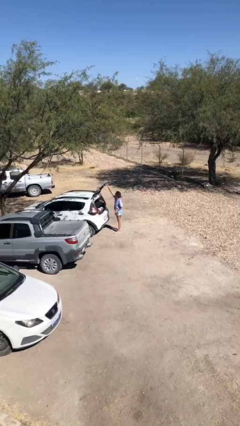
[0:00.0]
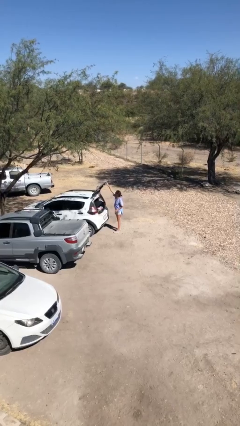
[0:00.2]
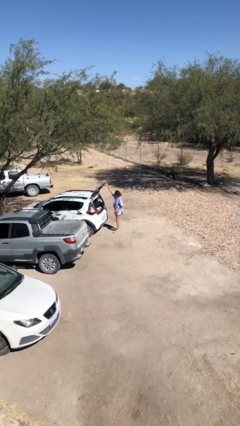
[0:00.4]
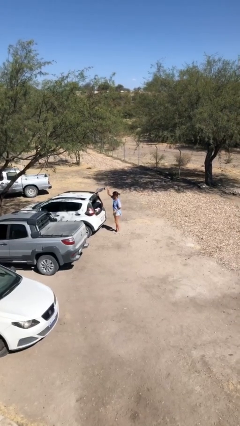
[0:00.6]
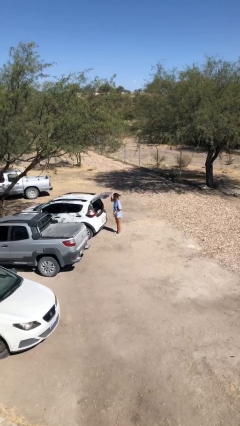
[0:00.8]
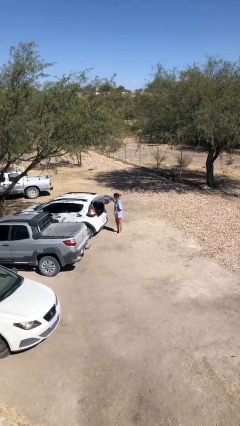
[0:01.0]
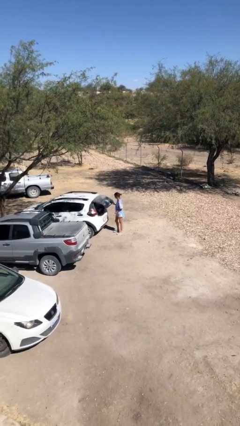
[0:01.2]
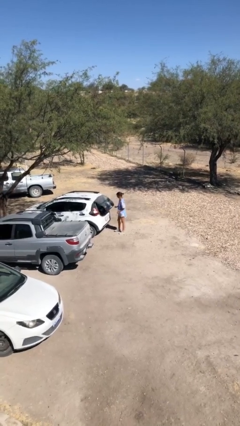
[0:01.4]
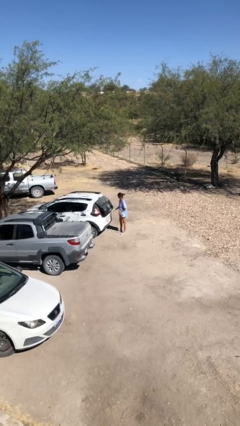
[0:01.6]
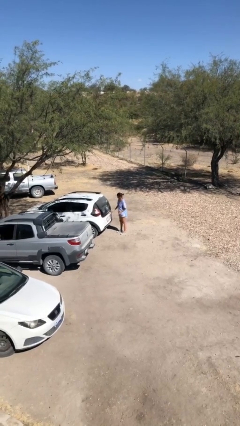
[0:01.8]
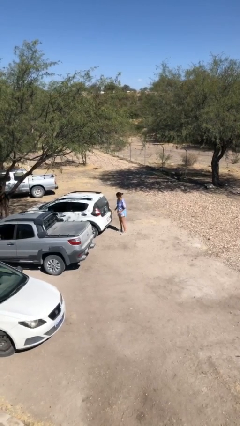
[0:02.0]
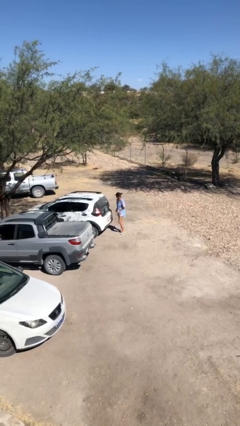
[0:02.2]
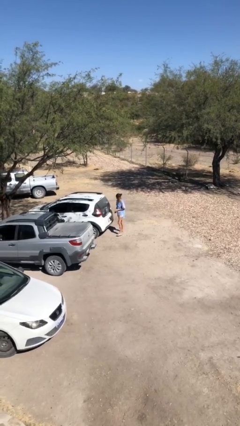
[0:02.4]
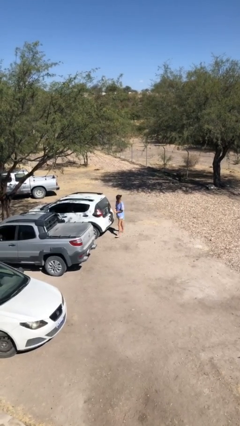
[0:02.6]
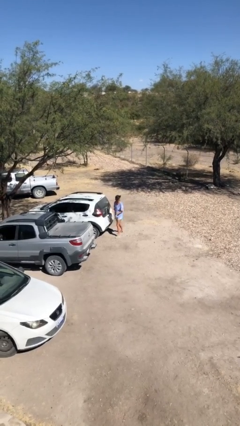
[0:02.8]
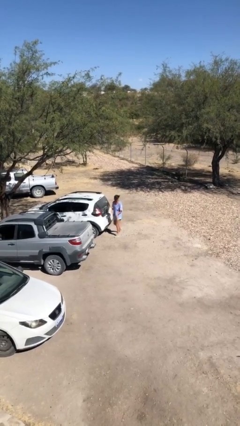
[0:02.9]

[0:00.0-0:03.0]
person closes car trunk

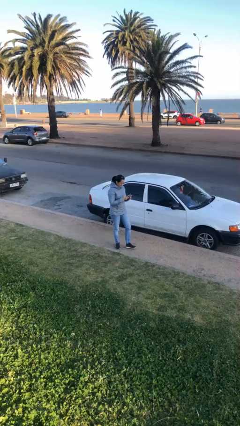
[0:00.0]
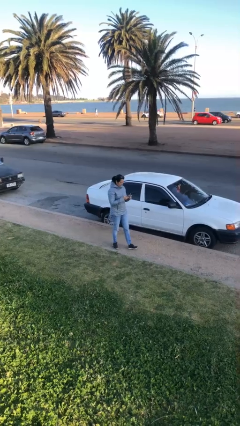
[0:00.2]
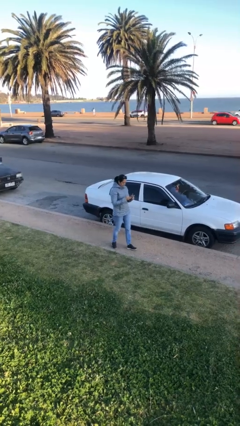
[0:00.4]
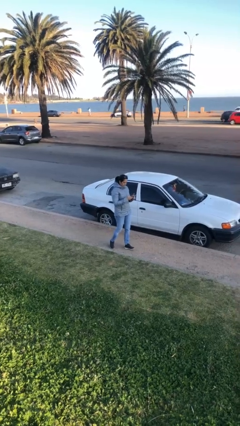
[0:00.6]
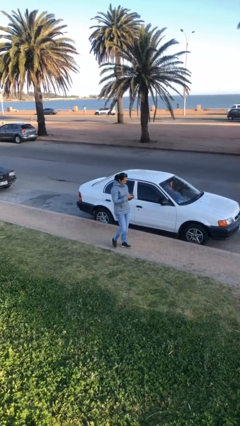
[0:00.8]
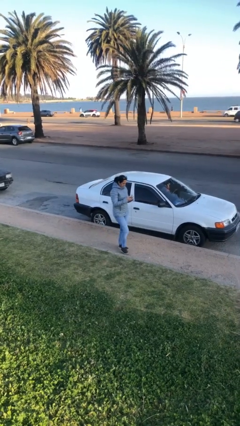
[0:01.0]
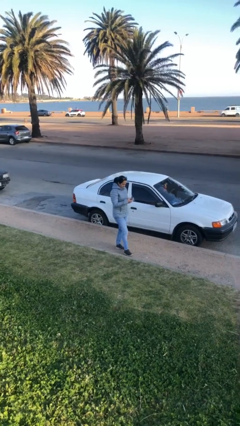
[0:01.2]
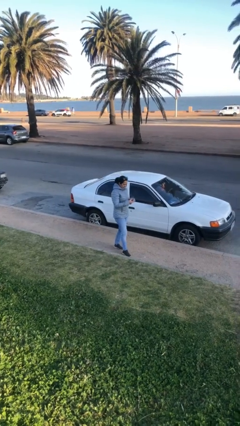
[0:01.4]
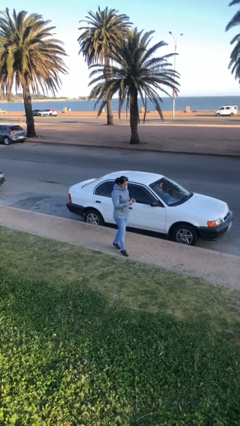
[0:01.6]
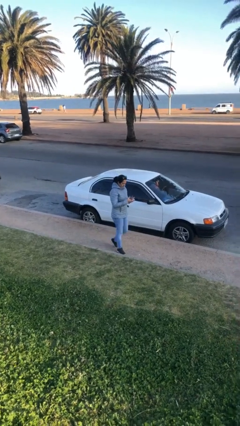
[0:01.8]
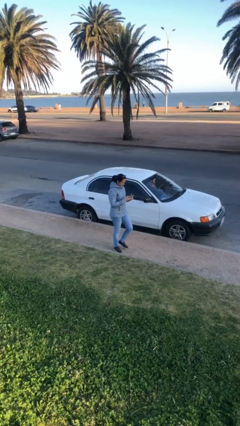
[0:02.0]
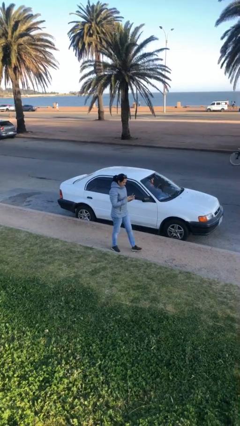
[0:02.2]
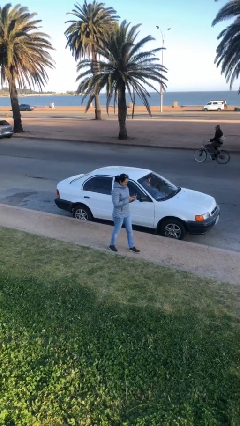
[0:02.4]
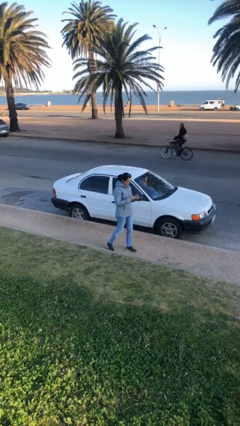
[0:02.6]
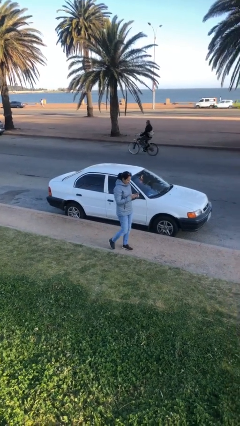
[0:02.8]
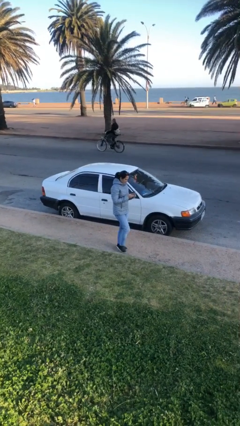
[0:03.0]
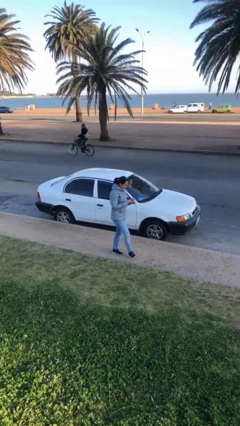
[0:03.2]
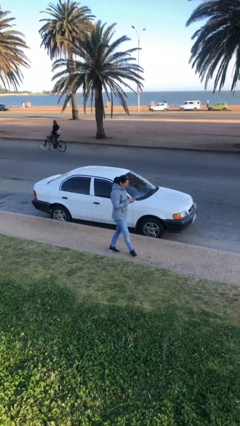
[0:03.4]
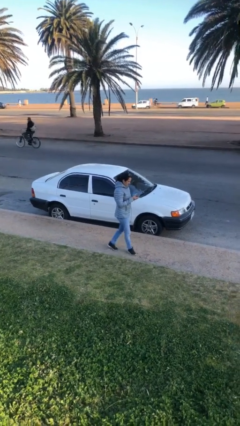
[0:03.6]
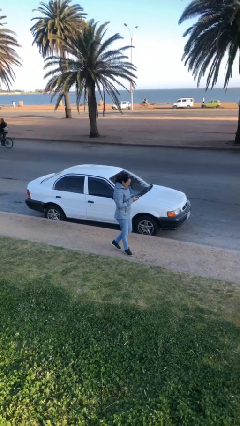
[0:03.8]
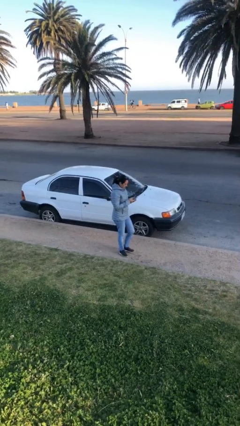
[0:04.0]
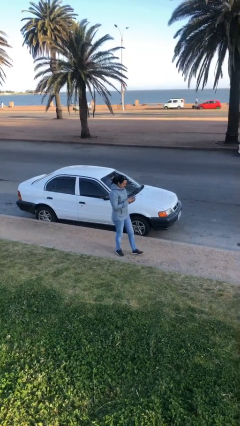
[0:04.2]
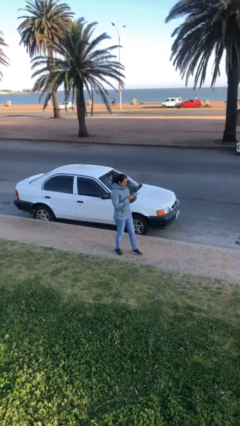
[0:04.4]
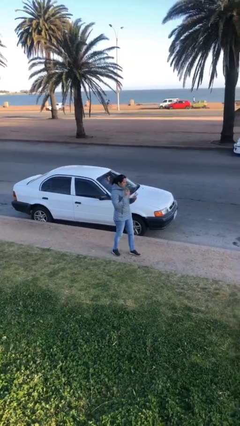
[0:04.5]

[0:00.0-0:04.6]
person texts on phone

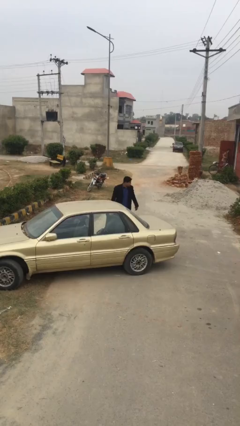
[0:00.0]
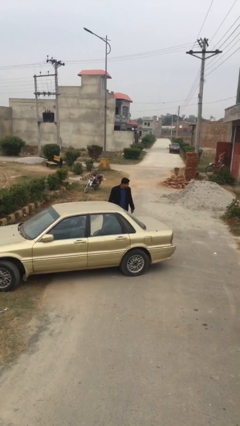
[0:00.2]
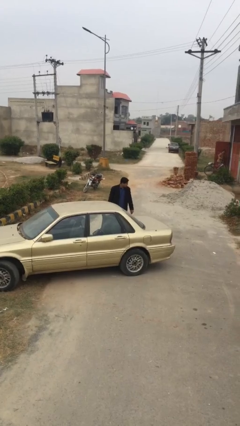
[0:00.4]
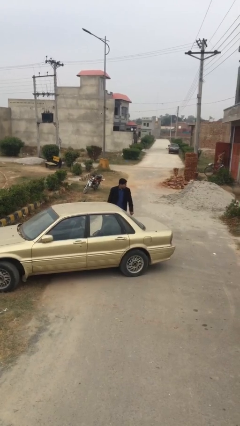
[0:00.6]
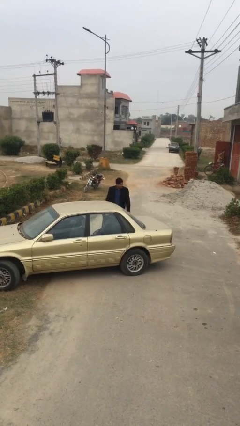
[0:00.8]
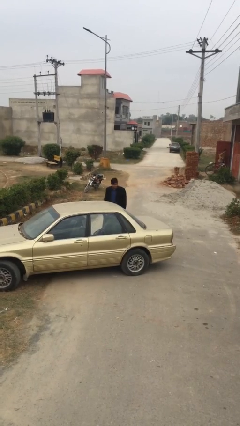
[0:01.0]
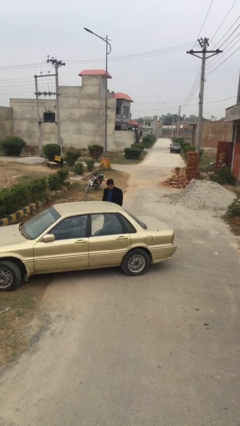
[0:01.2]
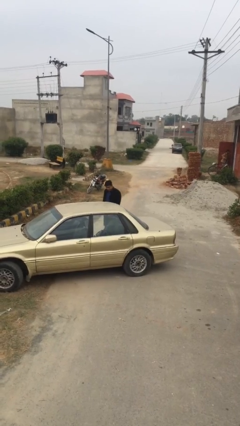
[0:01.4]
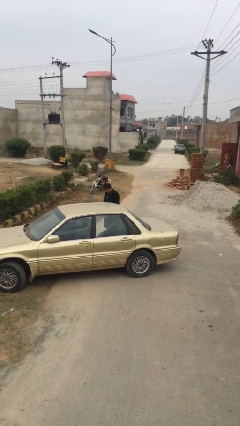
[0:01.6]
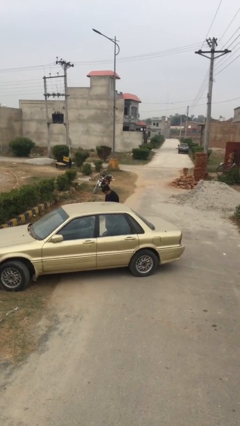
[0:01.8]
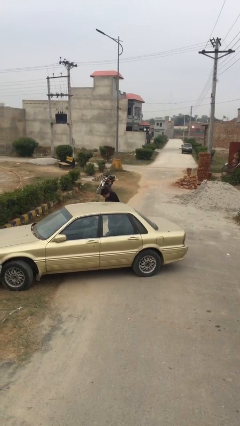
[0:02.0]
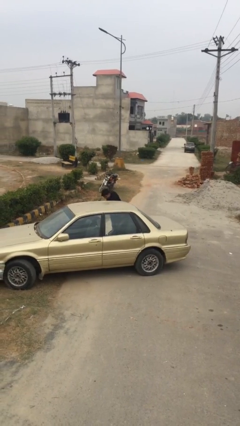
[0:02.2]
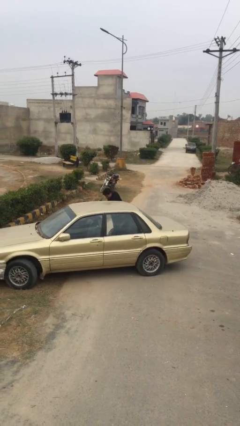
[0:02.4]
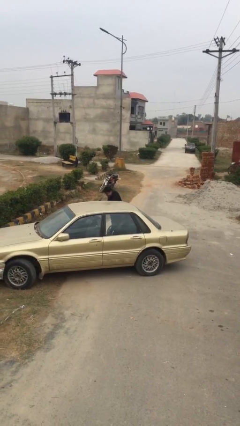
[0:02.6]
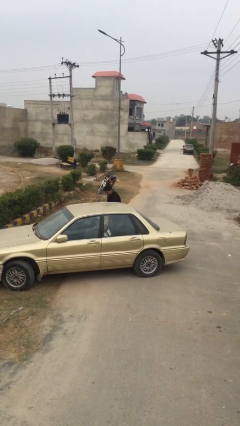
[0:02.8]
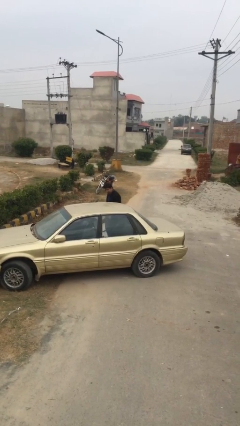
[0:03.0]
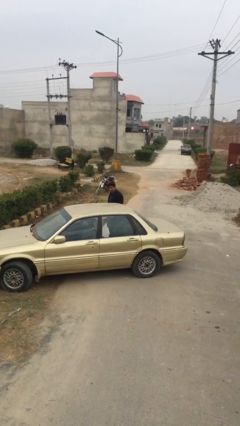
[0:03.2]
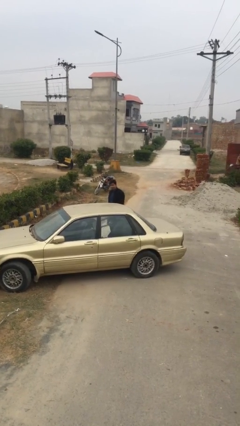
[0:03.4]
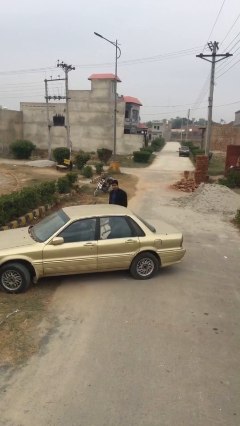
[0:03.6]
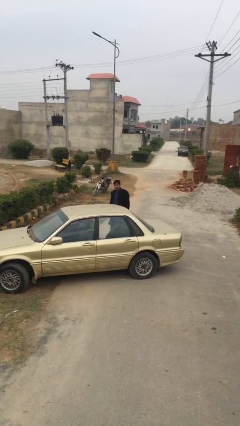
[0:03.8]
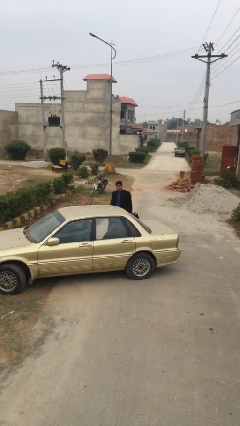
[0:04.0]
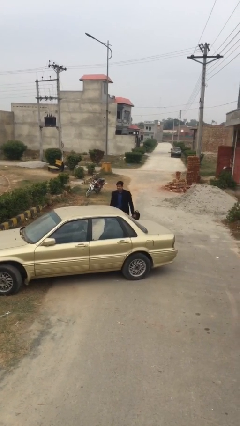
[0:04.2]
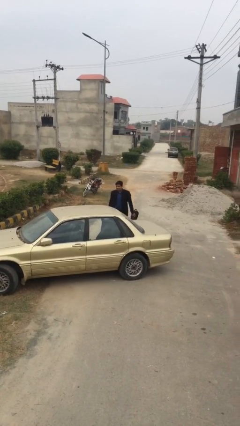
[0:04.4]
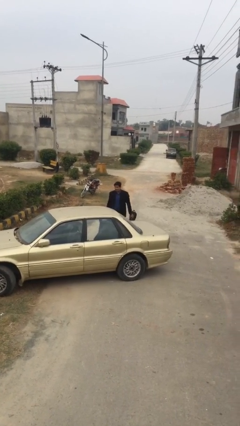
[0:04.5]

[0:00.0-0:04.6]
person unloads car

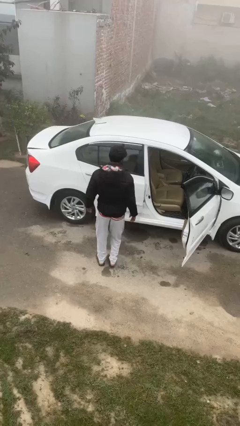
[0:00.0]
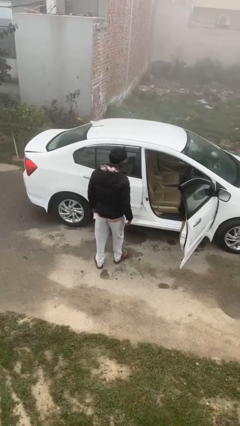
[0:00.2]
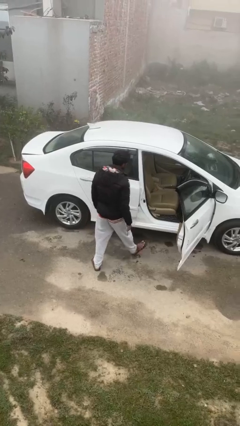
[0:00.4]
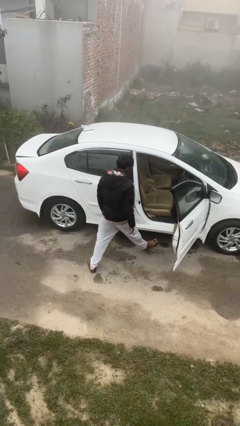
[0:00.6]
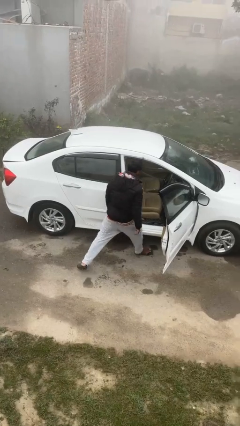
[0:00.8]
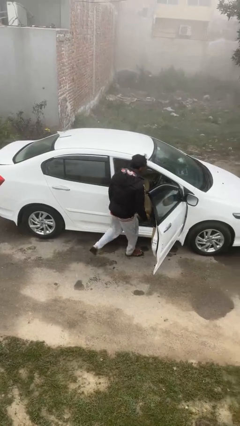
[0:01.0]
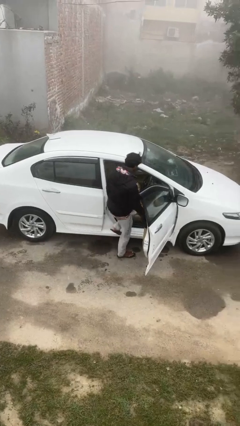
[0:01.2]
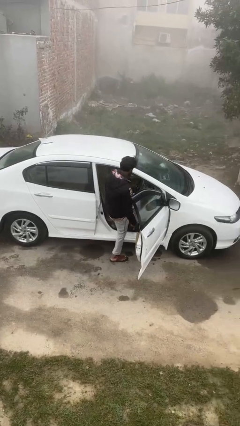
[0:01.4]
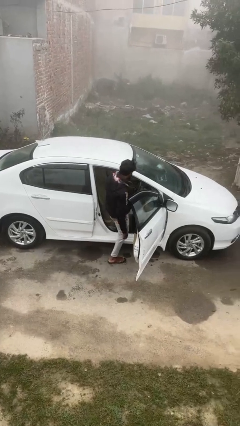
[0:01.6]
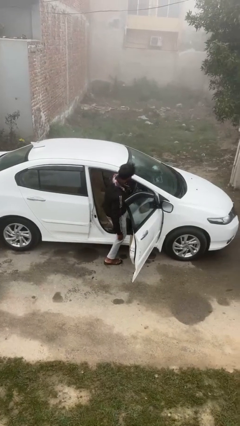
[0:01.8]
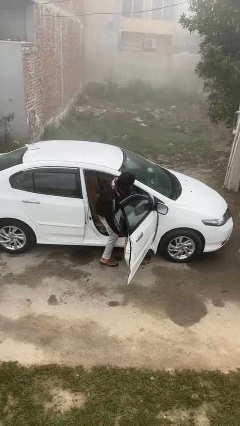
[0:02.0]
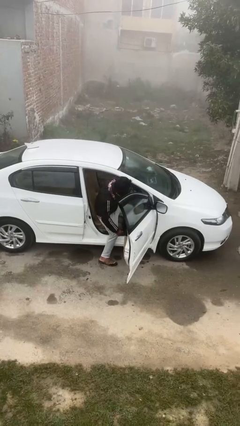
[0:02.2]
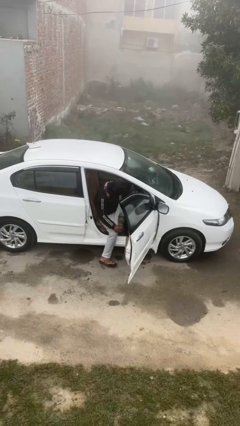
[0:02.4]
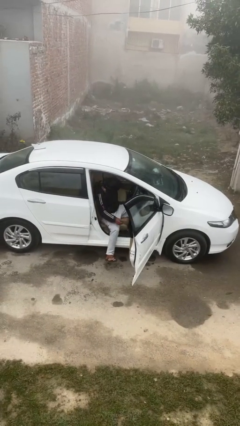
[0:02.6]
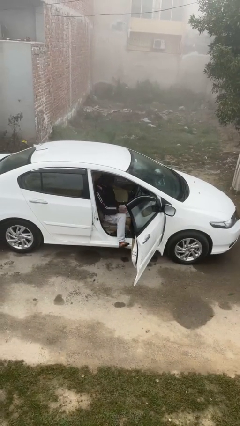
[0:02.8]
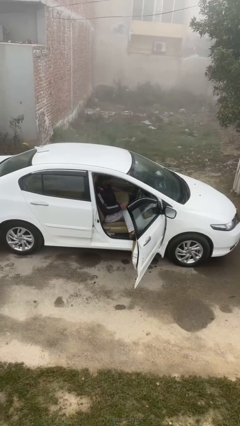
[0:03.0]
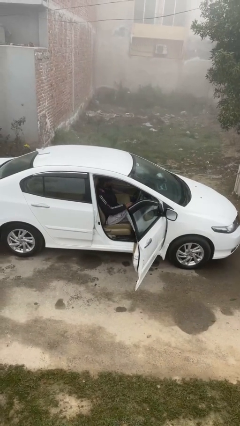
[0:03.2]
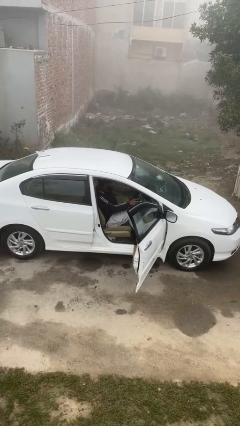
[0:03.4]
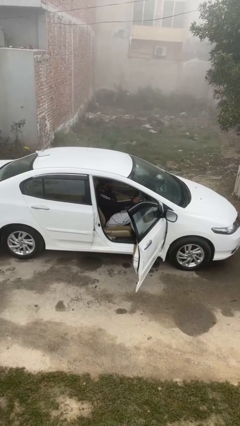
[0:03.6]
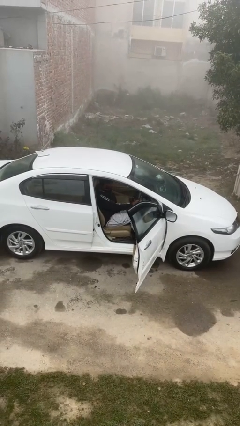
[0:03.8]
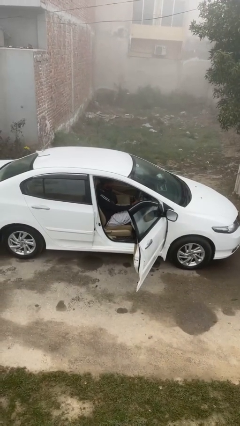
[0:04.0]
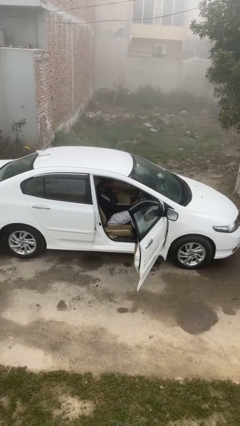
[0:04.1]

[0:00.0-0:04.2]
person enters car

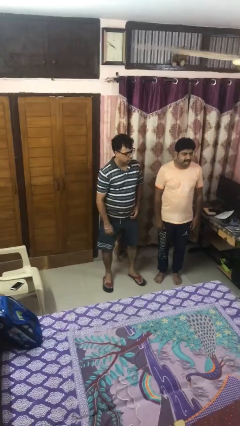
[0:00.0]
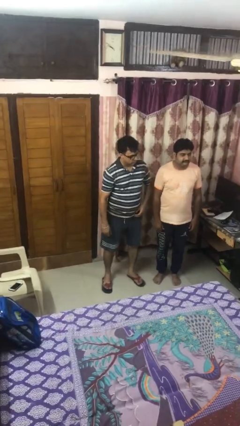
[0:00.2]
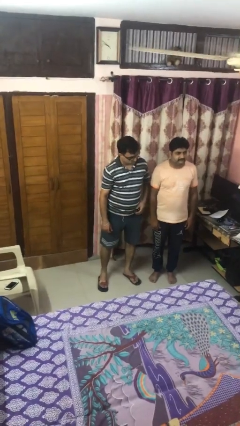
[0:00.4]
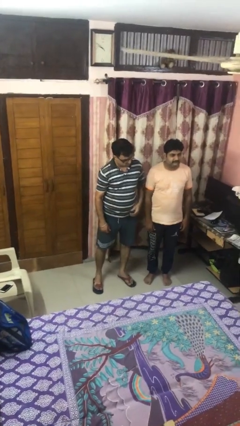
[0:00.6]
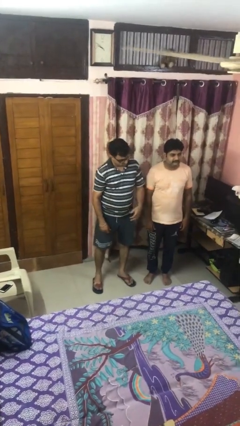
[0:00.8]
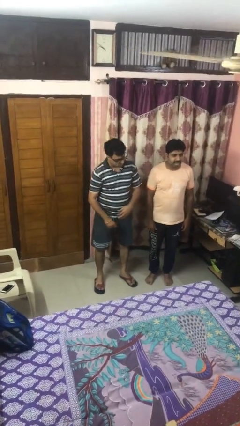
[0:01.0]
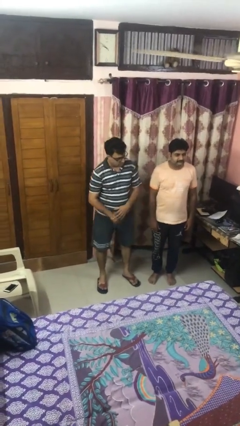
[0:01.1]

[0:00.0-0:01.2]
person nudges person with elbow
